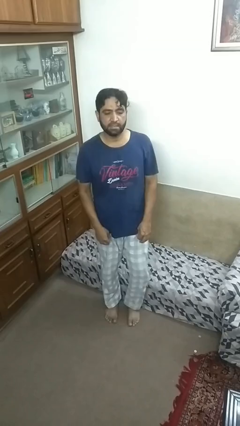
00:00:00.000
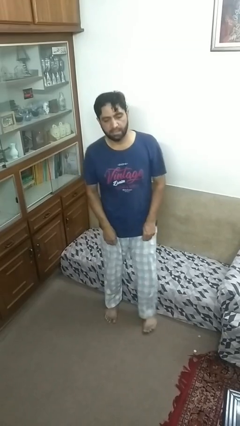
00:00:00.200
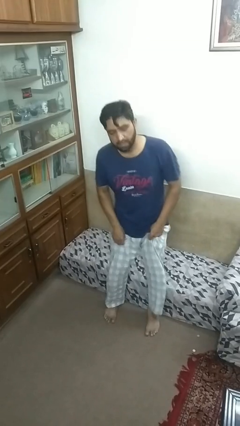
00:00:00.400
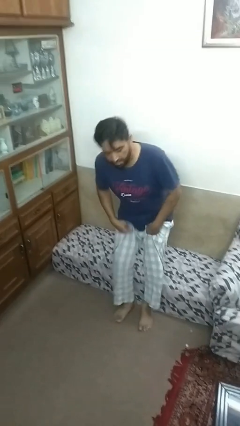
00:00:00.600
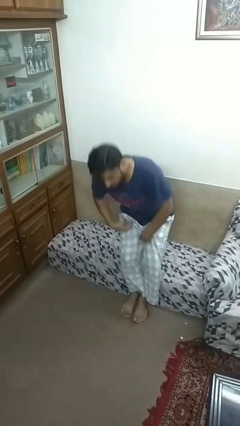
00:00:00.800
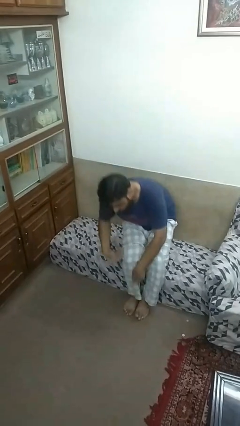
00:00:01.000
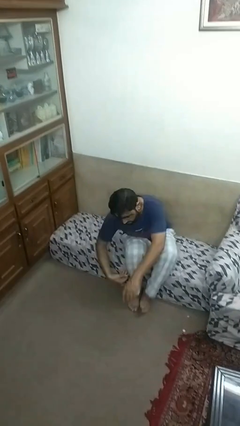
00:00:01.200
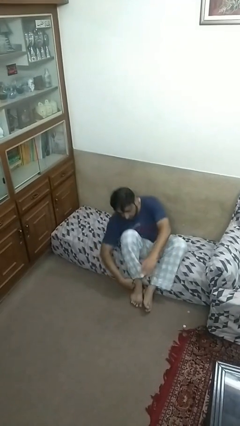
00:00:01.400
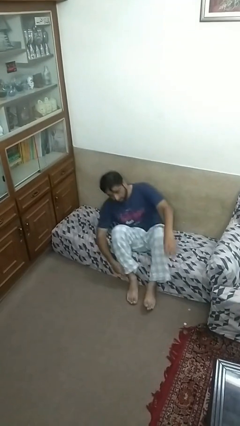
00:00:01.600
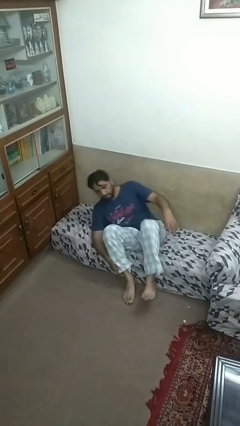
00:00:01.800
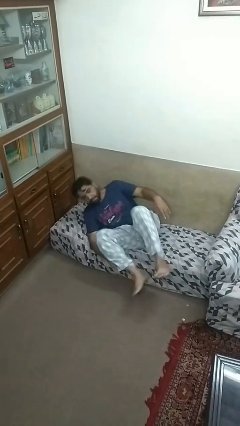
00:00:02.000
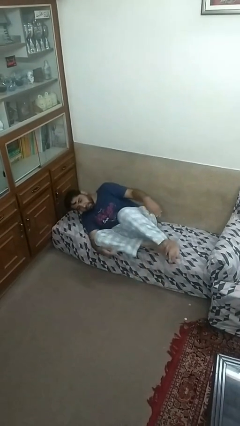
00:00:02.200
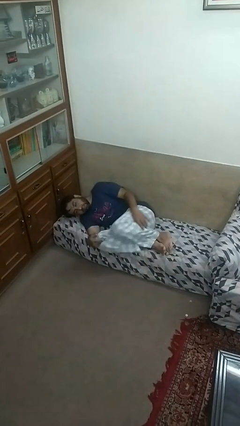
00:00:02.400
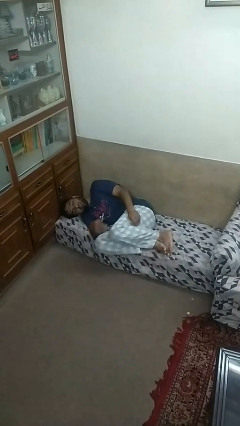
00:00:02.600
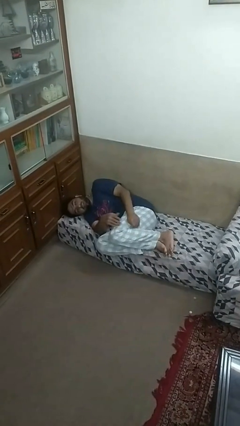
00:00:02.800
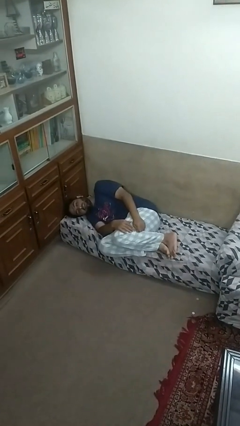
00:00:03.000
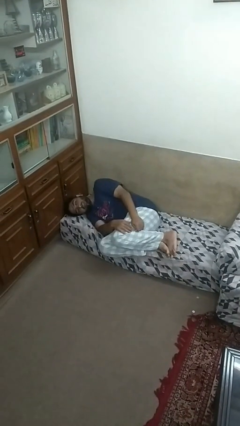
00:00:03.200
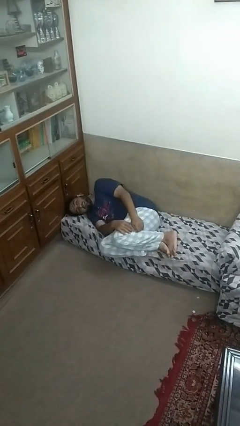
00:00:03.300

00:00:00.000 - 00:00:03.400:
person lies down on couch

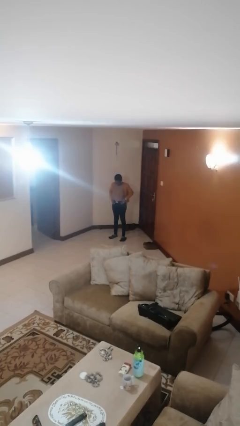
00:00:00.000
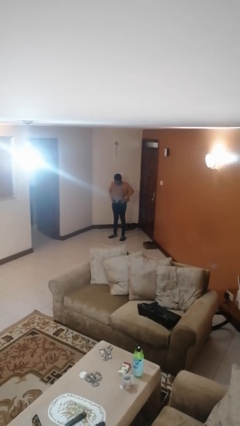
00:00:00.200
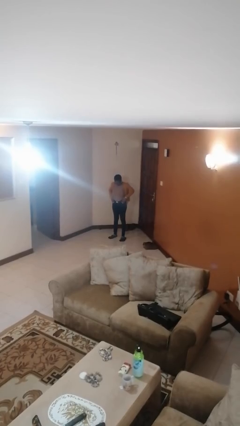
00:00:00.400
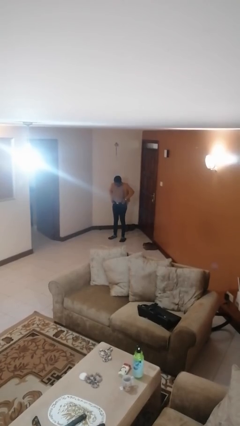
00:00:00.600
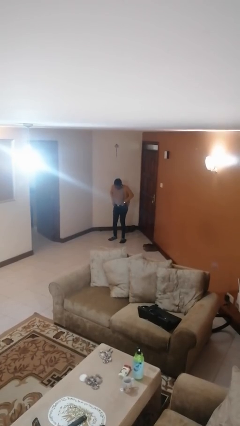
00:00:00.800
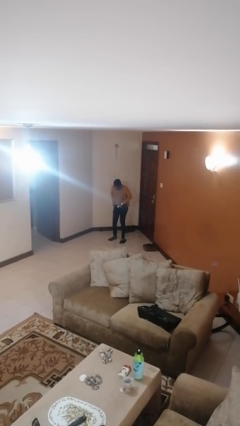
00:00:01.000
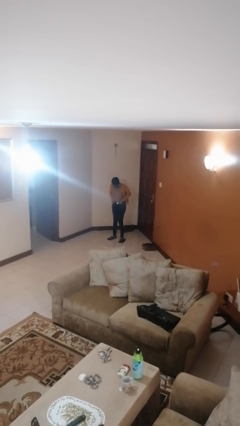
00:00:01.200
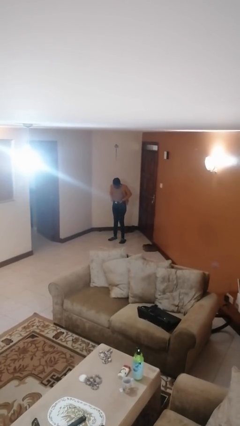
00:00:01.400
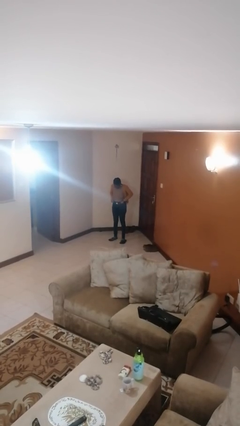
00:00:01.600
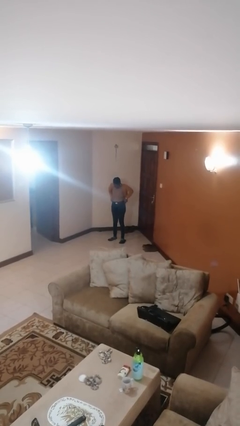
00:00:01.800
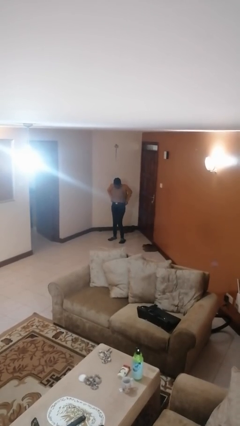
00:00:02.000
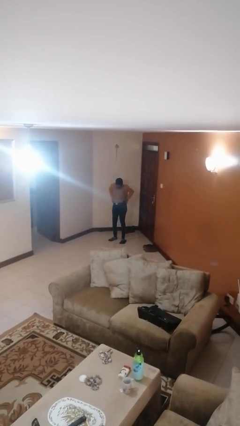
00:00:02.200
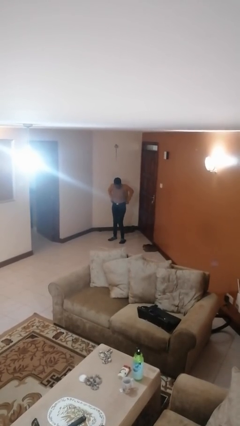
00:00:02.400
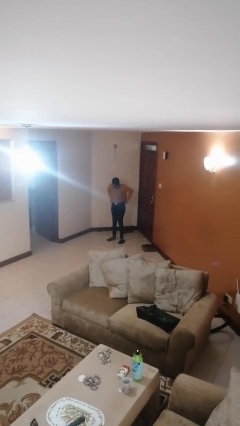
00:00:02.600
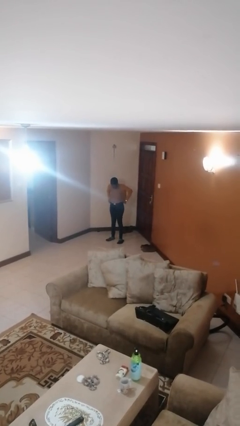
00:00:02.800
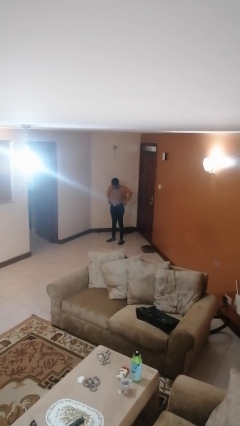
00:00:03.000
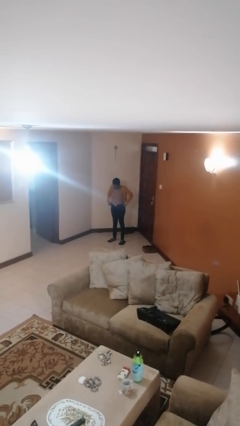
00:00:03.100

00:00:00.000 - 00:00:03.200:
person hikes up pants

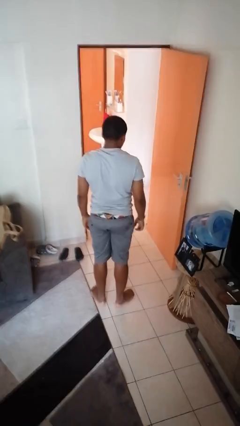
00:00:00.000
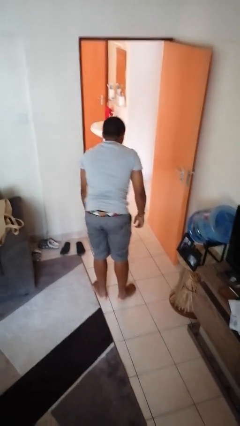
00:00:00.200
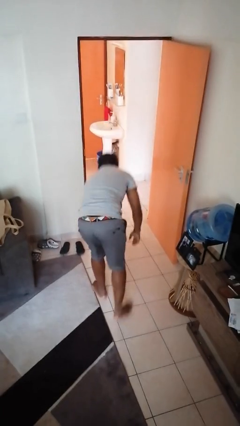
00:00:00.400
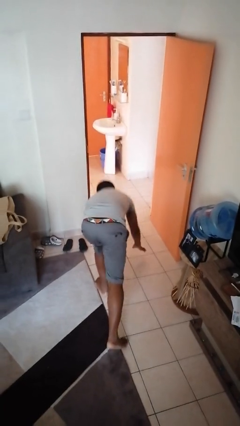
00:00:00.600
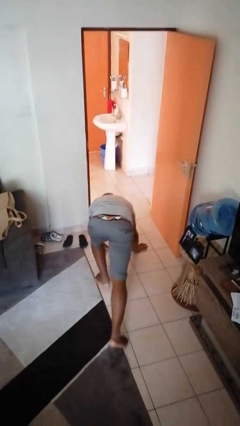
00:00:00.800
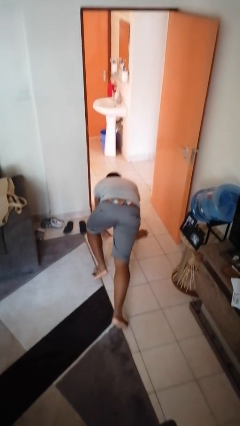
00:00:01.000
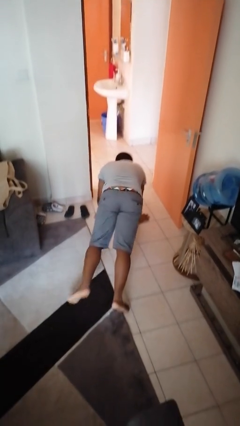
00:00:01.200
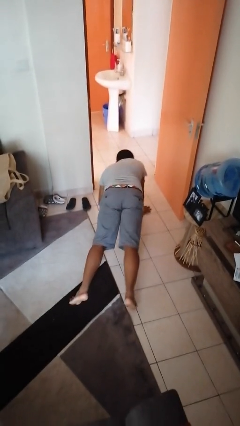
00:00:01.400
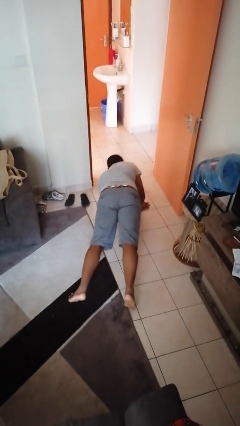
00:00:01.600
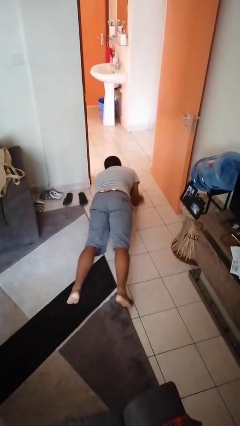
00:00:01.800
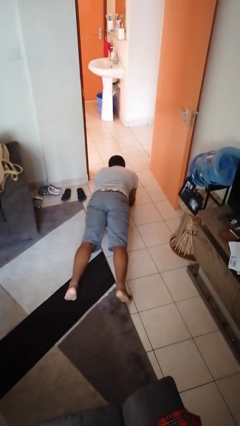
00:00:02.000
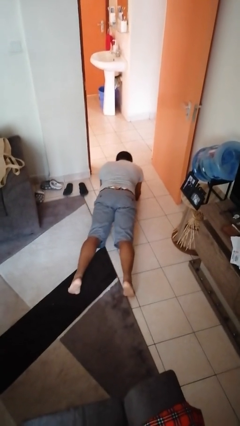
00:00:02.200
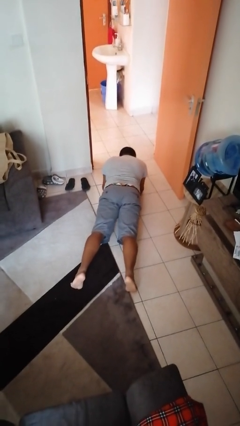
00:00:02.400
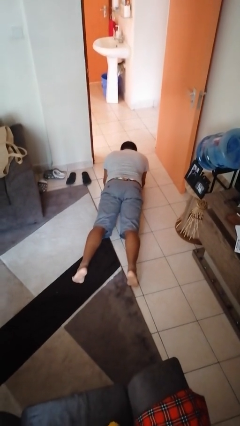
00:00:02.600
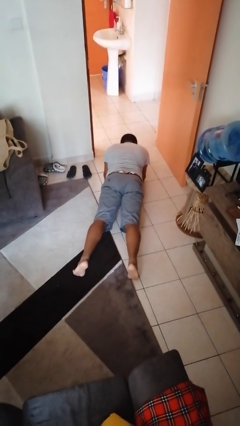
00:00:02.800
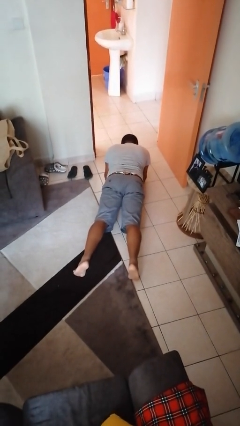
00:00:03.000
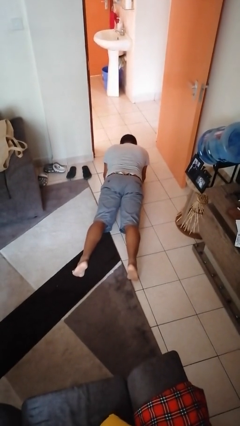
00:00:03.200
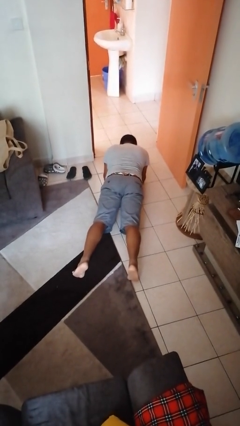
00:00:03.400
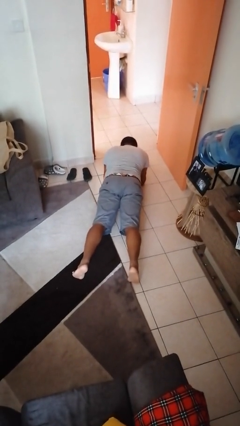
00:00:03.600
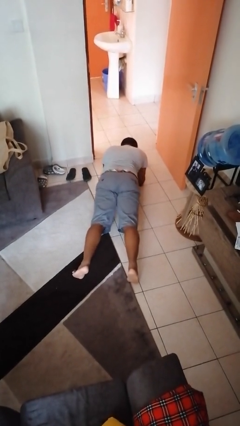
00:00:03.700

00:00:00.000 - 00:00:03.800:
person exercises with plank

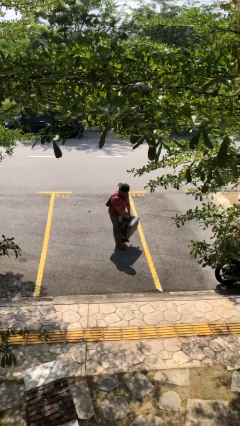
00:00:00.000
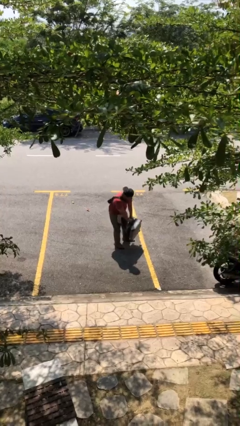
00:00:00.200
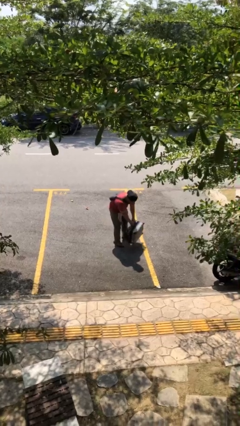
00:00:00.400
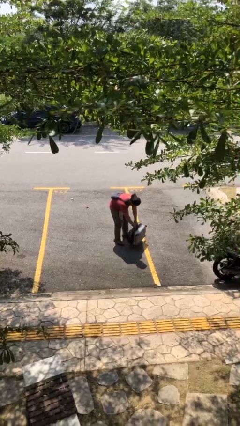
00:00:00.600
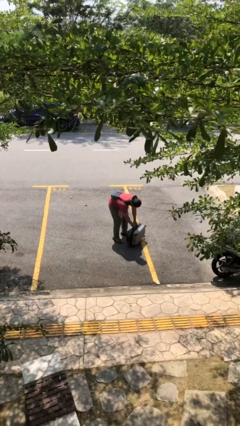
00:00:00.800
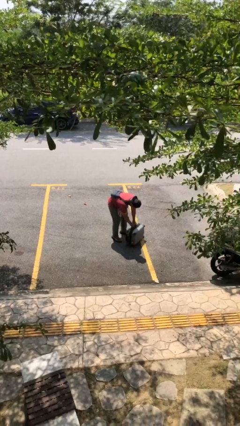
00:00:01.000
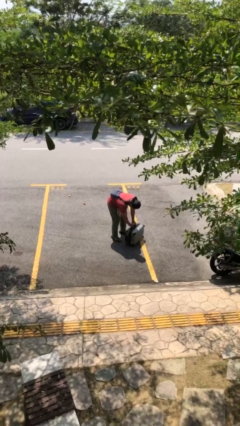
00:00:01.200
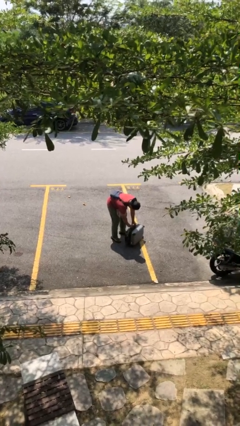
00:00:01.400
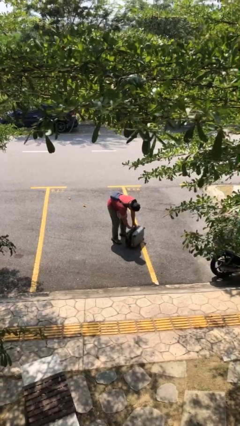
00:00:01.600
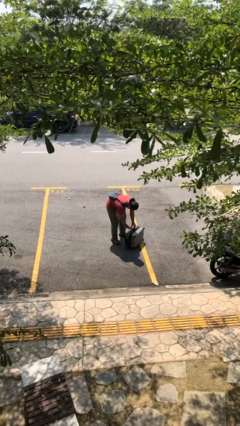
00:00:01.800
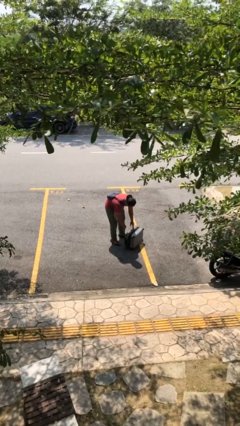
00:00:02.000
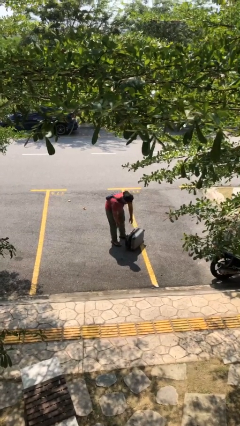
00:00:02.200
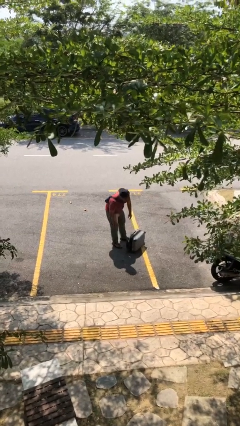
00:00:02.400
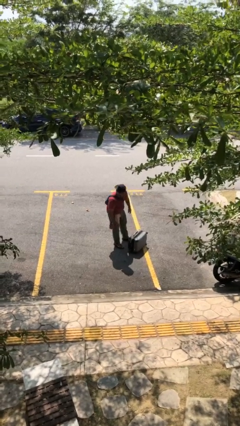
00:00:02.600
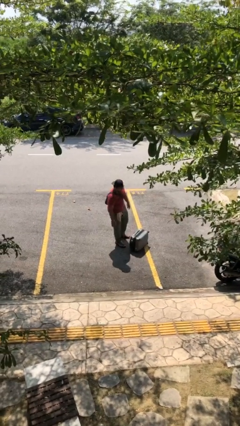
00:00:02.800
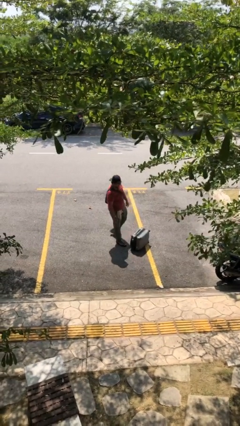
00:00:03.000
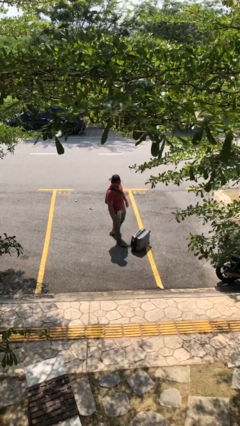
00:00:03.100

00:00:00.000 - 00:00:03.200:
person puts down object on floor

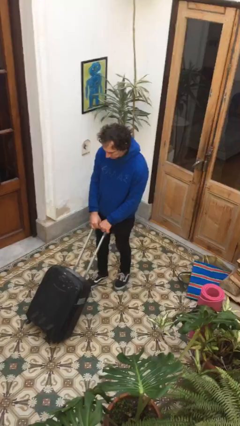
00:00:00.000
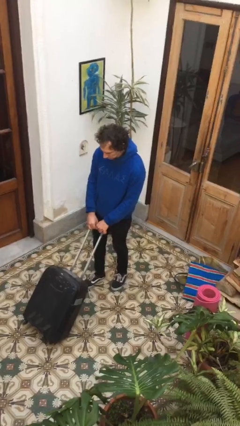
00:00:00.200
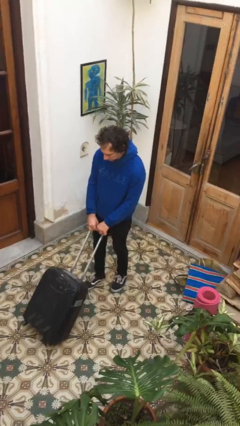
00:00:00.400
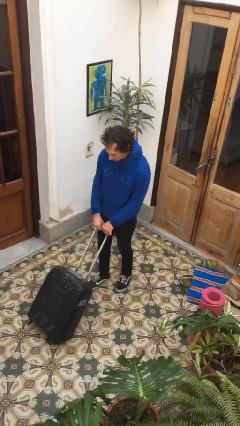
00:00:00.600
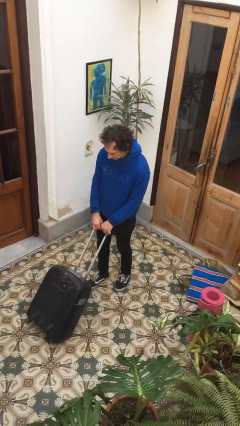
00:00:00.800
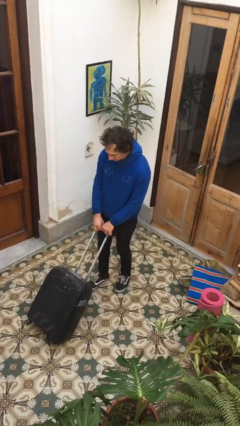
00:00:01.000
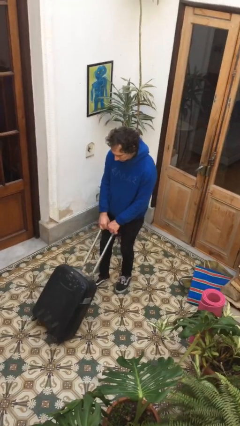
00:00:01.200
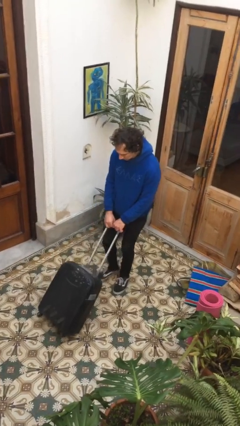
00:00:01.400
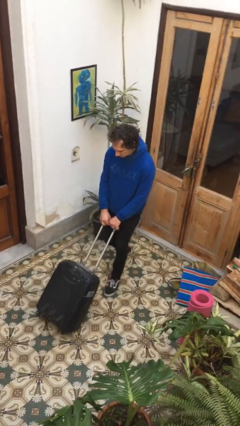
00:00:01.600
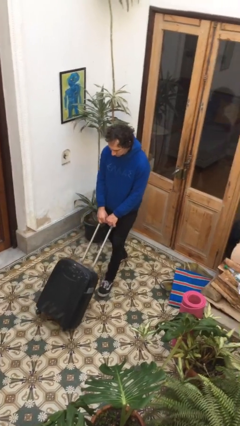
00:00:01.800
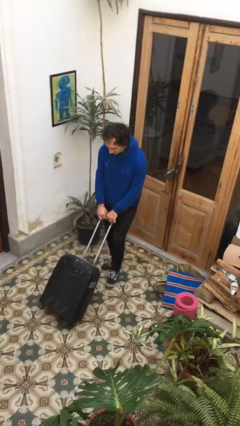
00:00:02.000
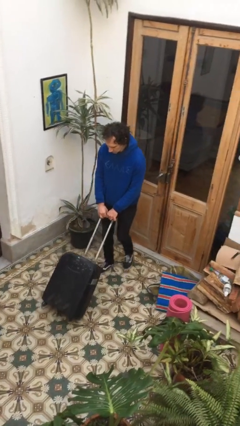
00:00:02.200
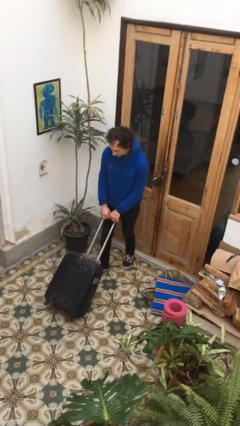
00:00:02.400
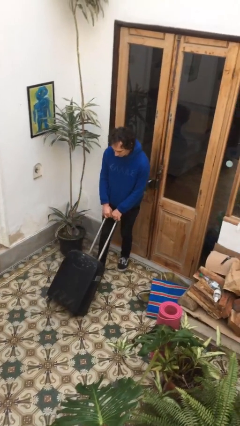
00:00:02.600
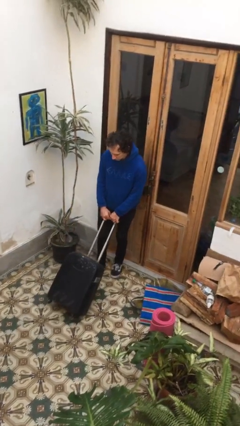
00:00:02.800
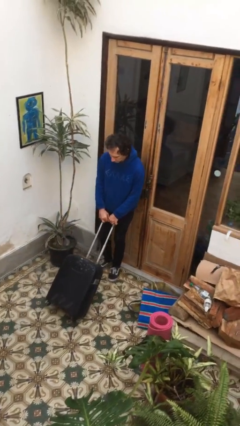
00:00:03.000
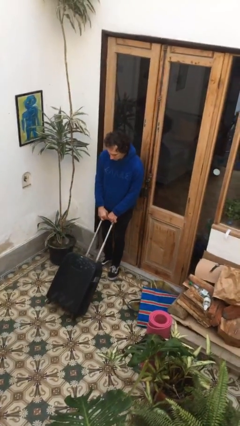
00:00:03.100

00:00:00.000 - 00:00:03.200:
person pulls wheeled cart

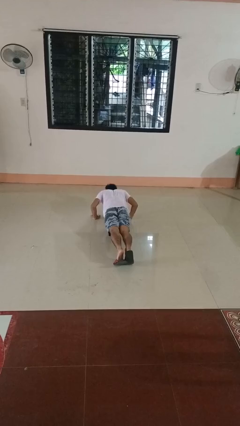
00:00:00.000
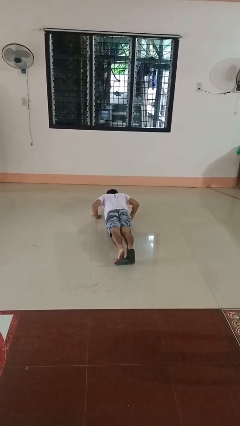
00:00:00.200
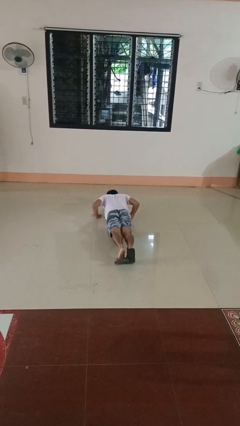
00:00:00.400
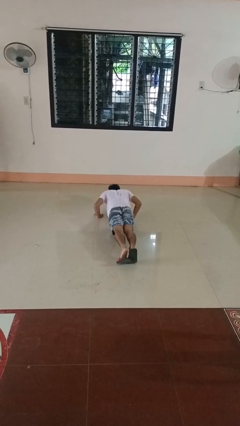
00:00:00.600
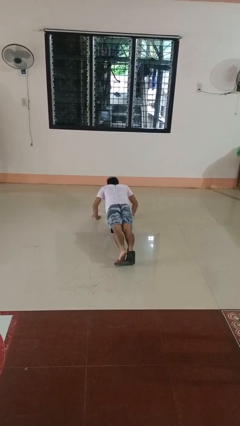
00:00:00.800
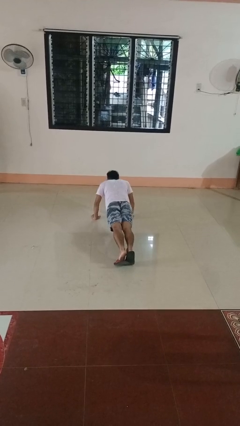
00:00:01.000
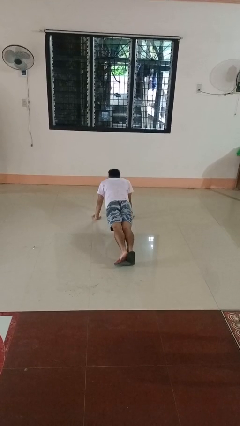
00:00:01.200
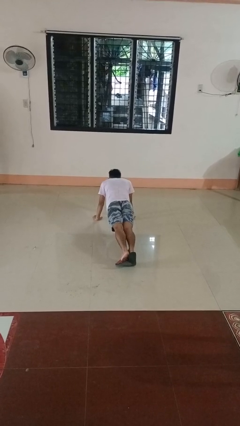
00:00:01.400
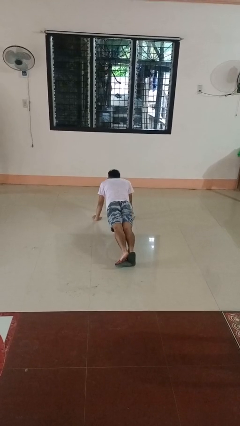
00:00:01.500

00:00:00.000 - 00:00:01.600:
person exercises with pushup
